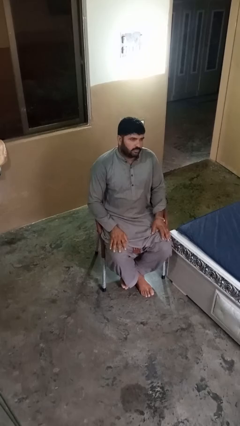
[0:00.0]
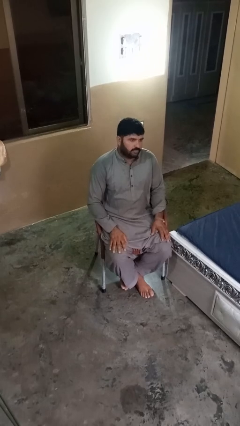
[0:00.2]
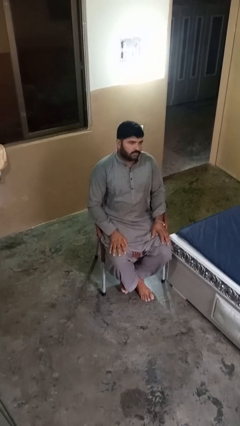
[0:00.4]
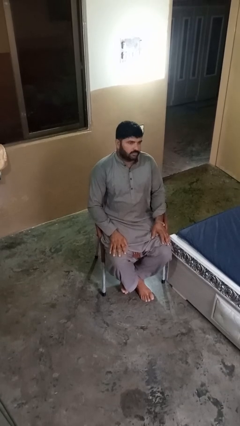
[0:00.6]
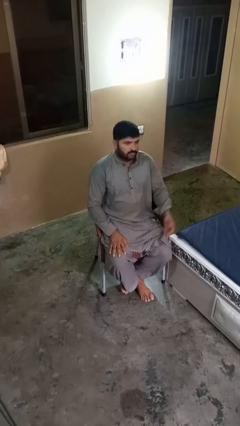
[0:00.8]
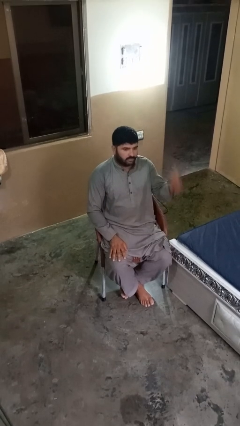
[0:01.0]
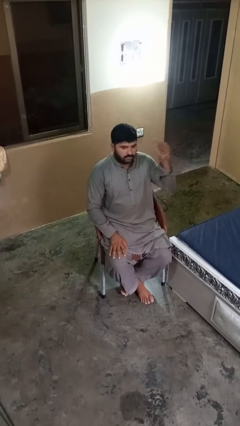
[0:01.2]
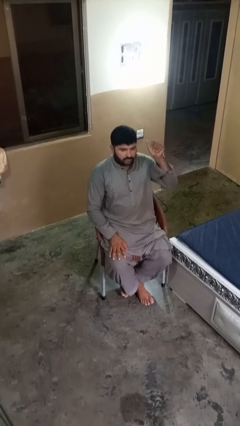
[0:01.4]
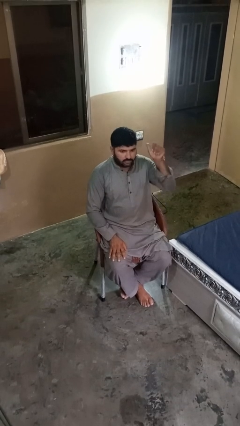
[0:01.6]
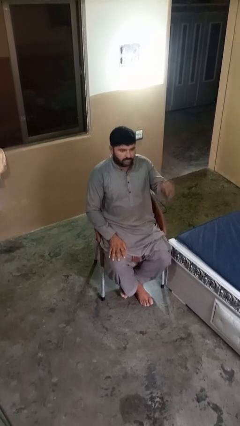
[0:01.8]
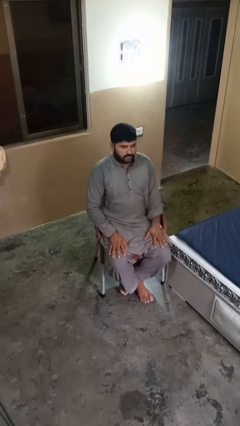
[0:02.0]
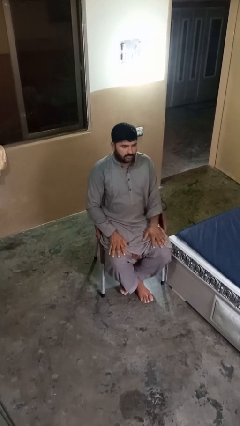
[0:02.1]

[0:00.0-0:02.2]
person gestures behind me

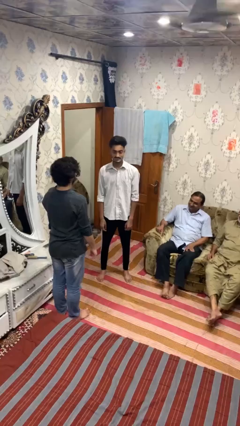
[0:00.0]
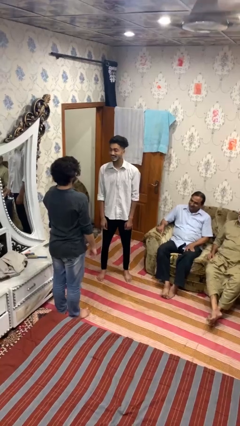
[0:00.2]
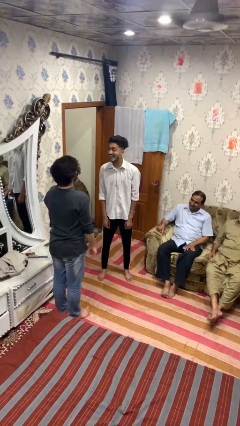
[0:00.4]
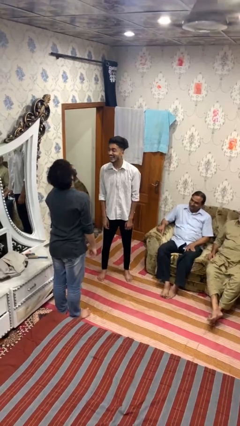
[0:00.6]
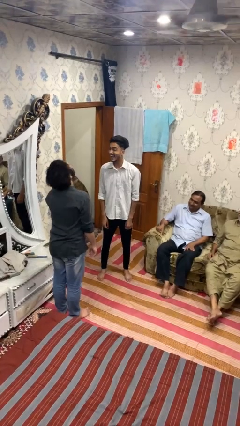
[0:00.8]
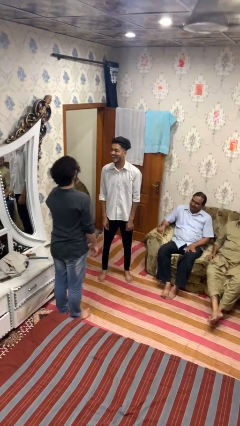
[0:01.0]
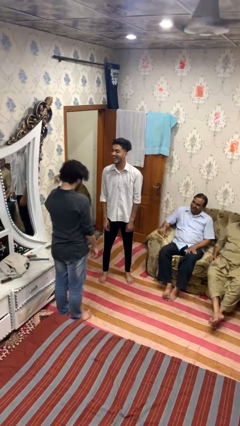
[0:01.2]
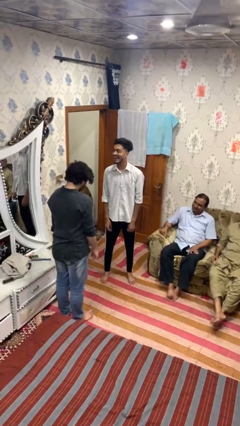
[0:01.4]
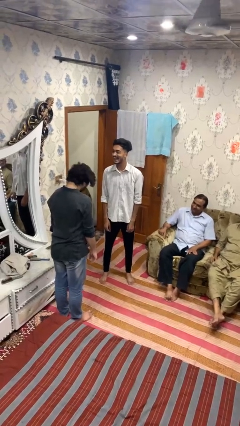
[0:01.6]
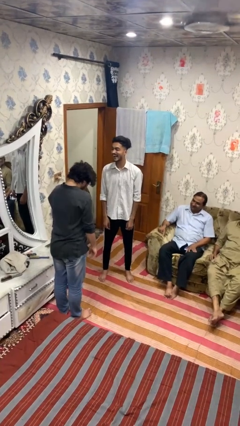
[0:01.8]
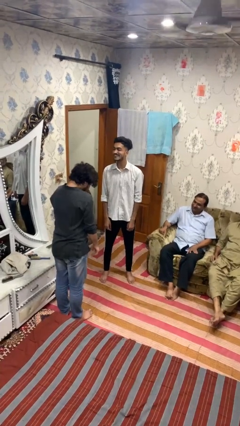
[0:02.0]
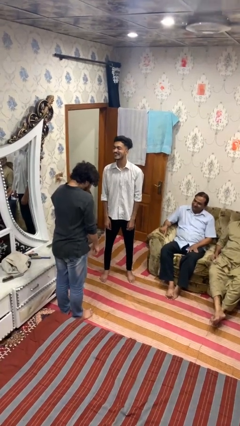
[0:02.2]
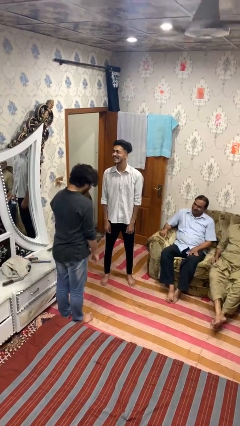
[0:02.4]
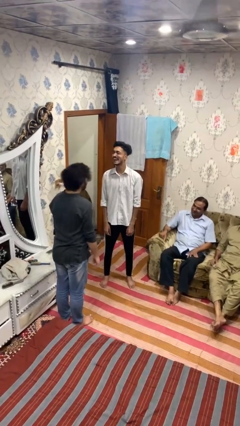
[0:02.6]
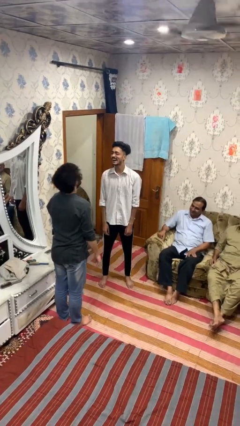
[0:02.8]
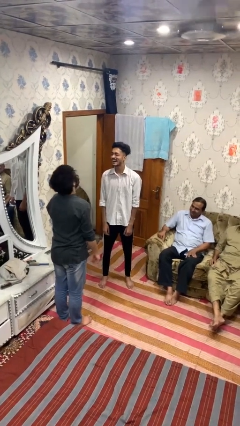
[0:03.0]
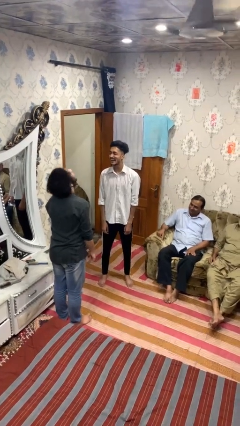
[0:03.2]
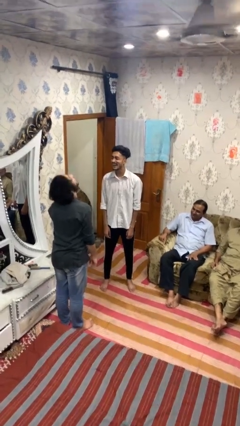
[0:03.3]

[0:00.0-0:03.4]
person laughs with person

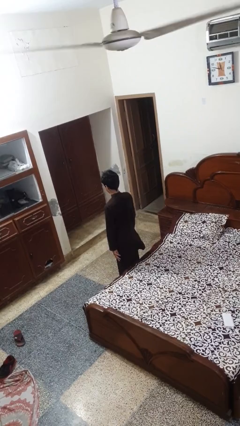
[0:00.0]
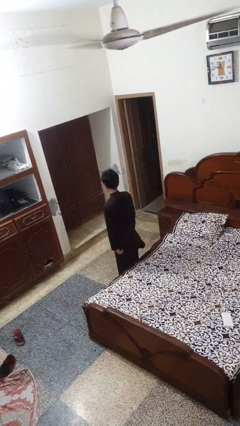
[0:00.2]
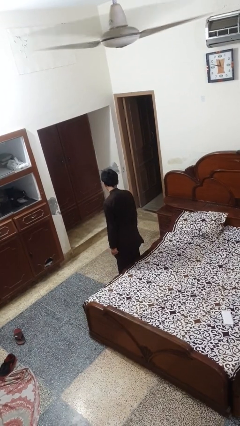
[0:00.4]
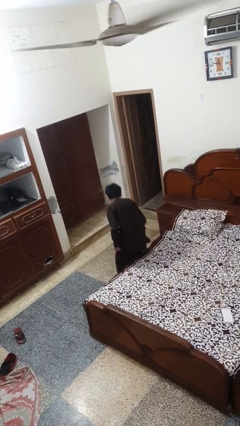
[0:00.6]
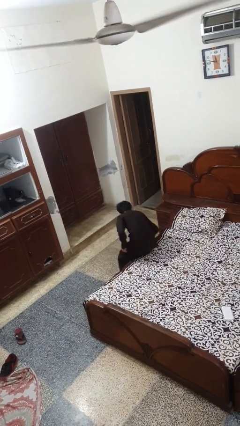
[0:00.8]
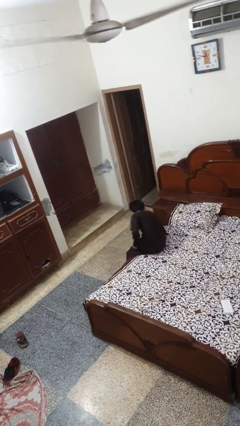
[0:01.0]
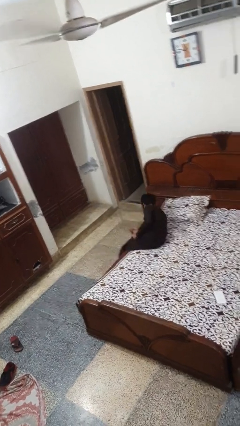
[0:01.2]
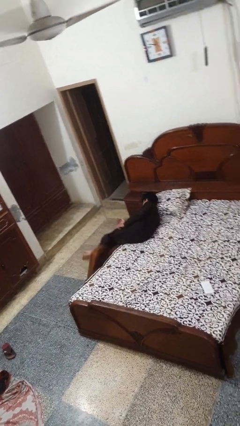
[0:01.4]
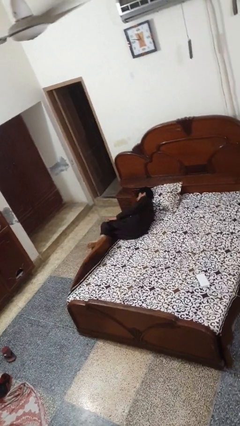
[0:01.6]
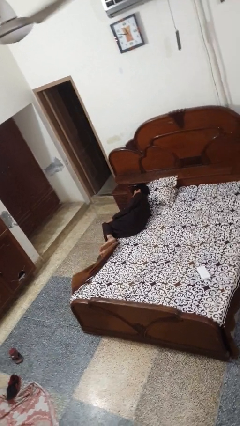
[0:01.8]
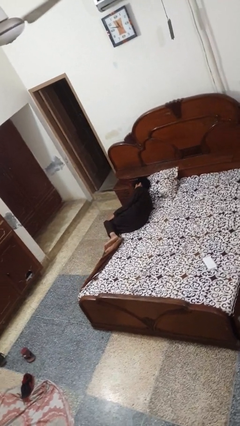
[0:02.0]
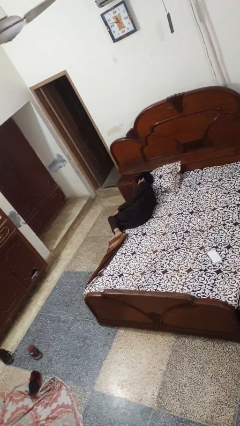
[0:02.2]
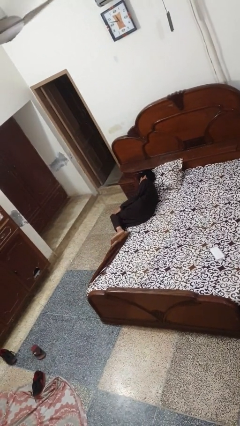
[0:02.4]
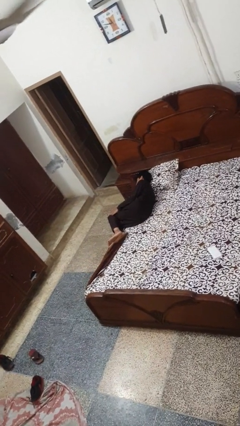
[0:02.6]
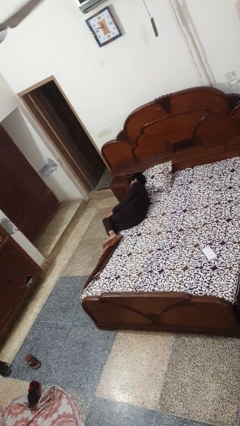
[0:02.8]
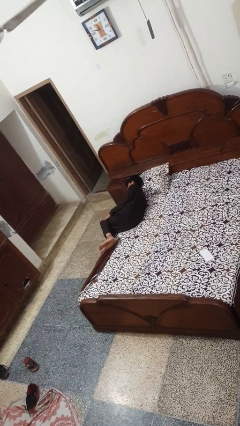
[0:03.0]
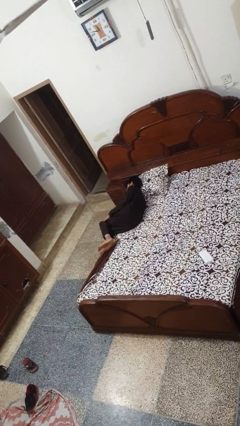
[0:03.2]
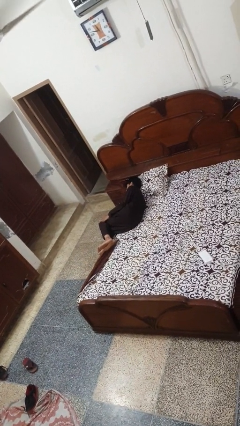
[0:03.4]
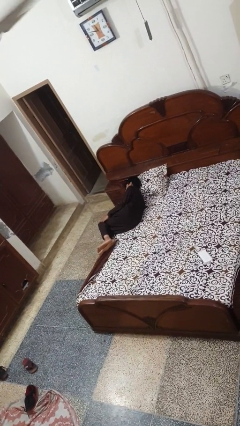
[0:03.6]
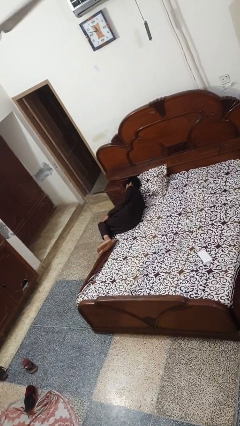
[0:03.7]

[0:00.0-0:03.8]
person lies down on bed

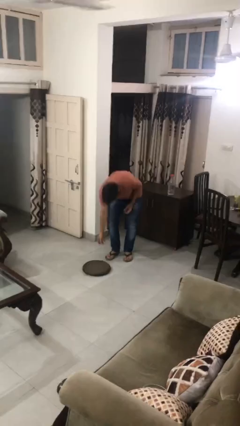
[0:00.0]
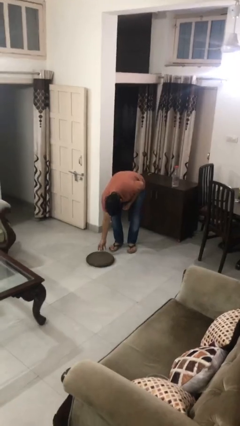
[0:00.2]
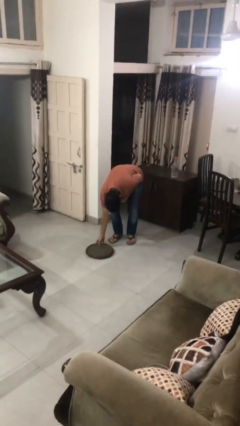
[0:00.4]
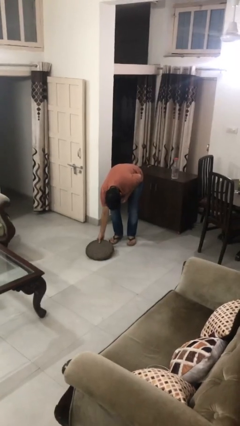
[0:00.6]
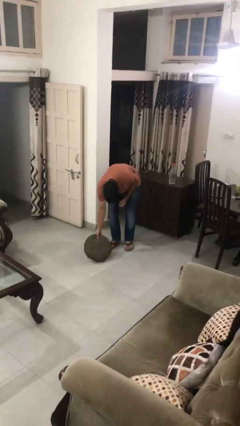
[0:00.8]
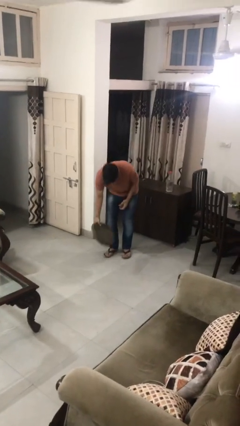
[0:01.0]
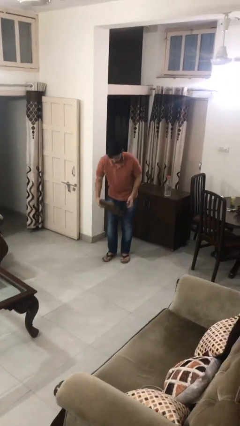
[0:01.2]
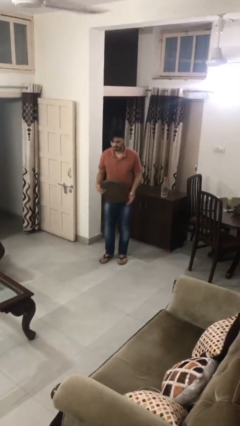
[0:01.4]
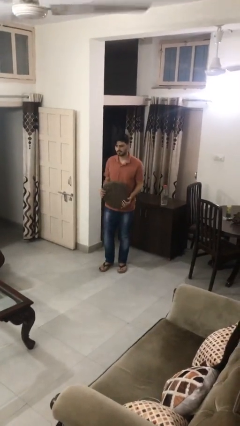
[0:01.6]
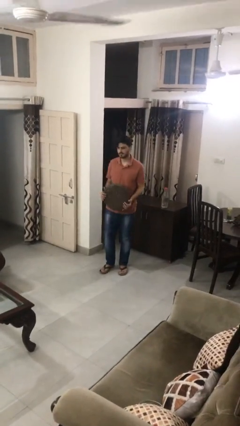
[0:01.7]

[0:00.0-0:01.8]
person picks up object from floor

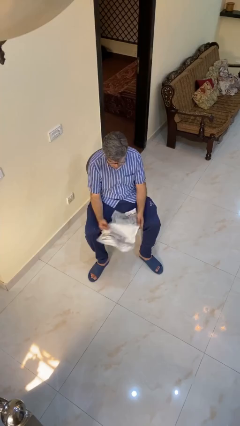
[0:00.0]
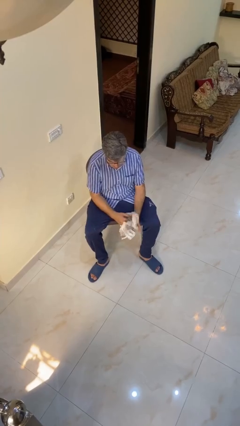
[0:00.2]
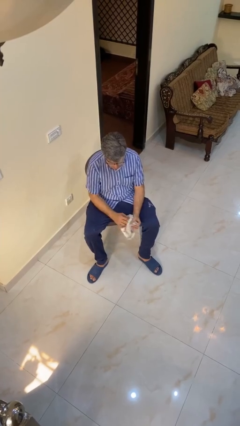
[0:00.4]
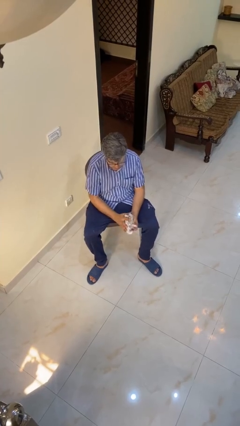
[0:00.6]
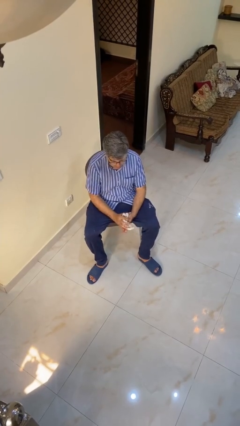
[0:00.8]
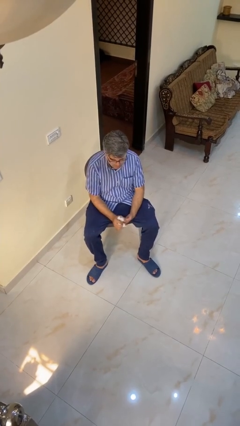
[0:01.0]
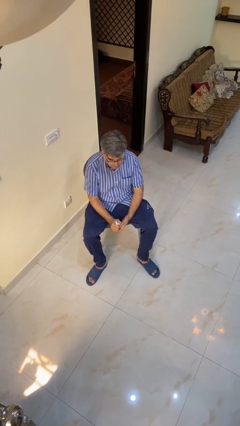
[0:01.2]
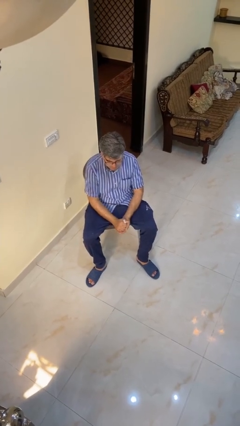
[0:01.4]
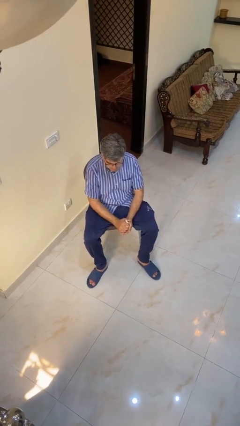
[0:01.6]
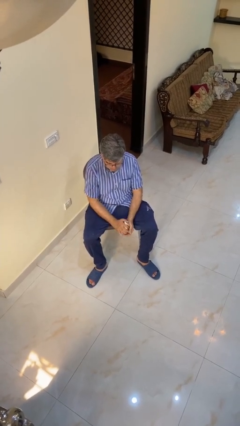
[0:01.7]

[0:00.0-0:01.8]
person crumples paper

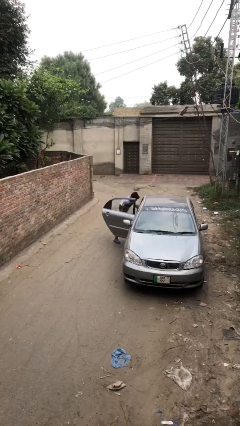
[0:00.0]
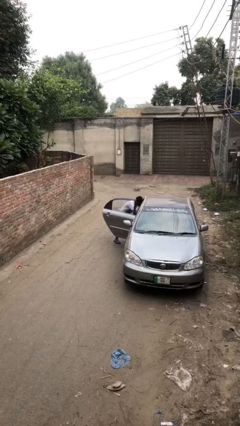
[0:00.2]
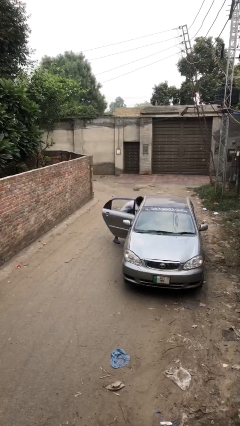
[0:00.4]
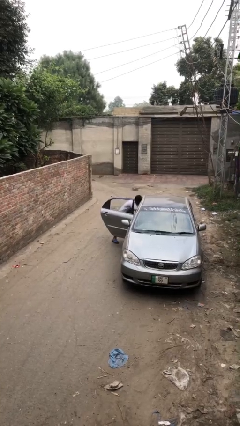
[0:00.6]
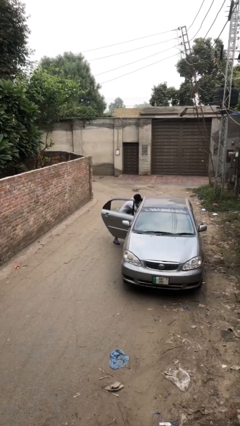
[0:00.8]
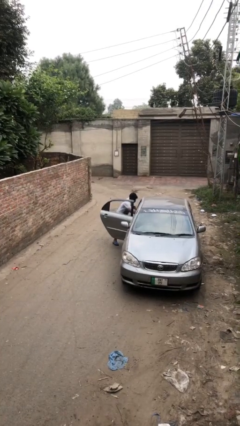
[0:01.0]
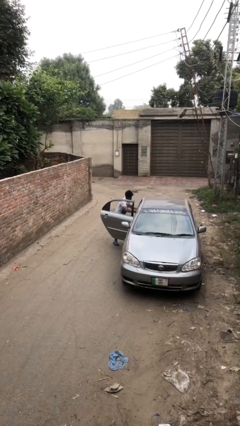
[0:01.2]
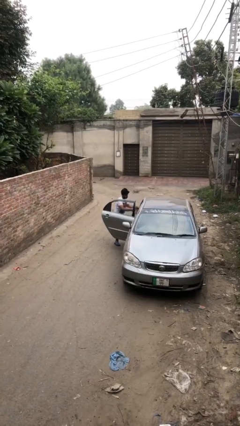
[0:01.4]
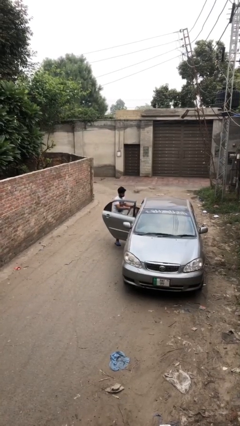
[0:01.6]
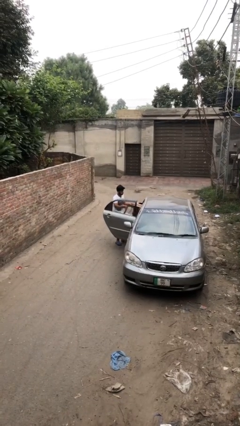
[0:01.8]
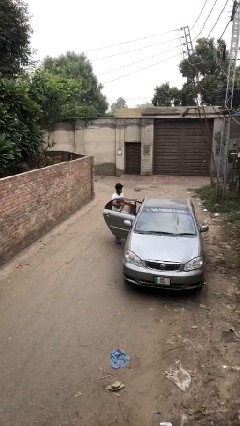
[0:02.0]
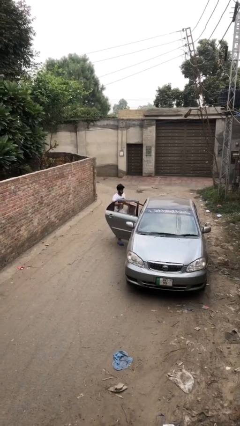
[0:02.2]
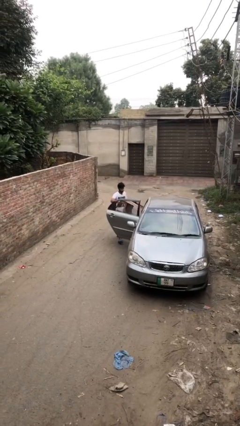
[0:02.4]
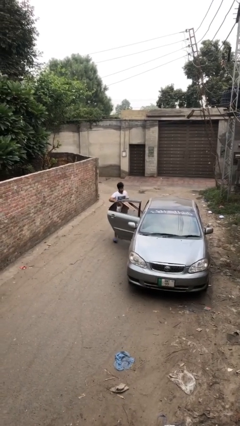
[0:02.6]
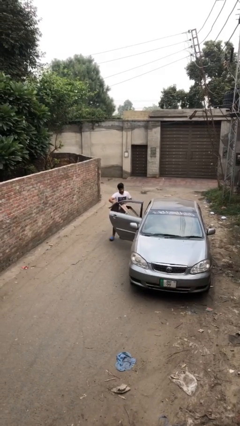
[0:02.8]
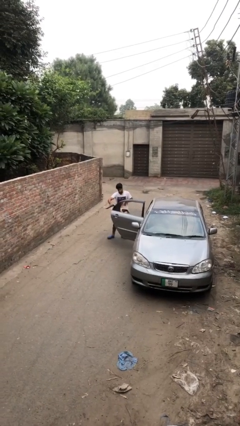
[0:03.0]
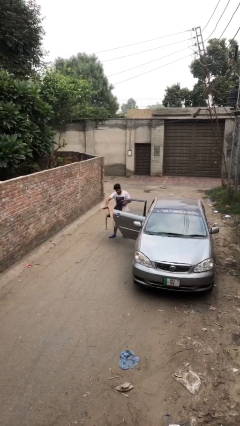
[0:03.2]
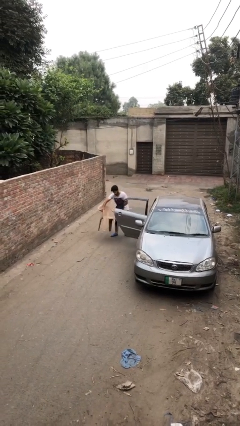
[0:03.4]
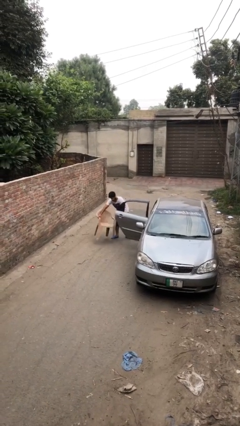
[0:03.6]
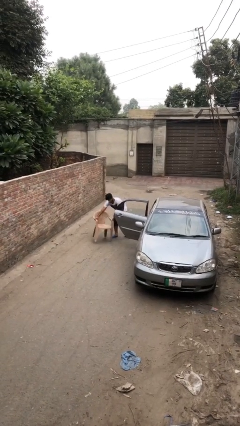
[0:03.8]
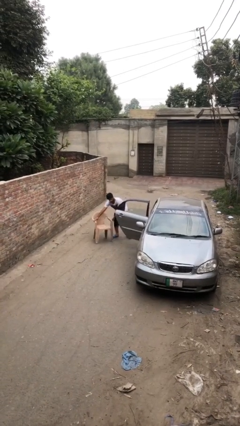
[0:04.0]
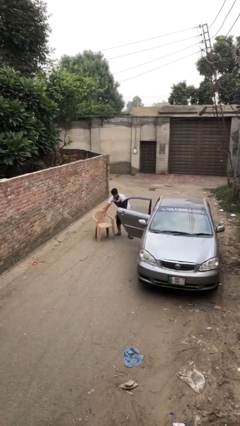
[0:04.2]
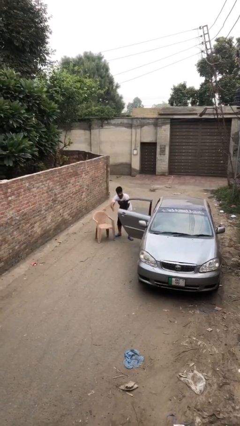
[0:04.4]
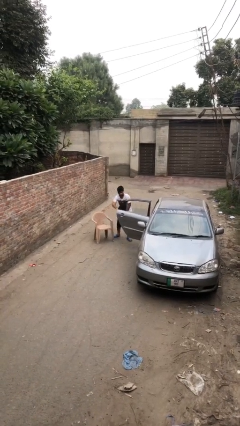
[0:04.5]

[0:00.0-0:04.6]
person unloads car
